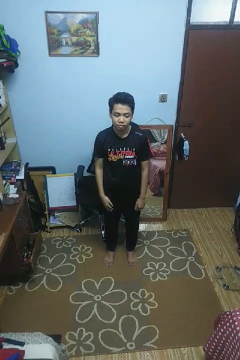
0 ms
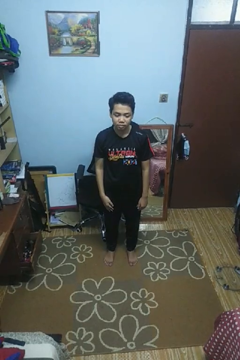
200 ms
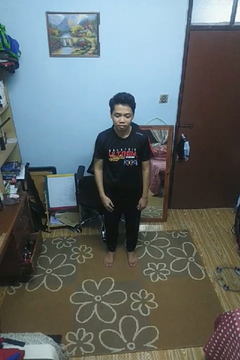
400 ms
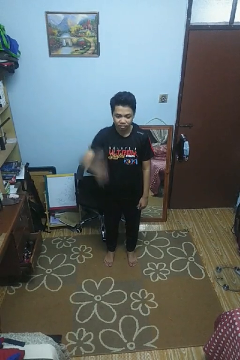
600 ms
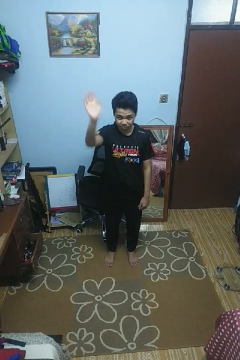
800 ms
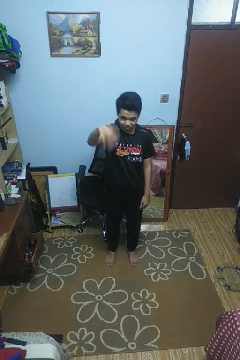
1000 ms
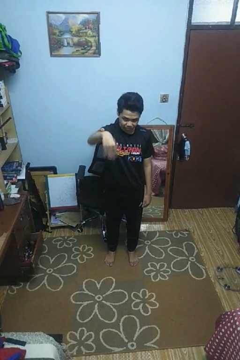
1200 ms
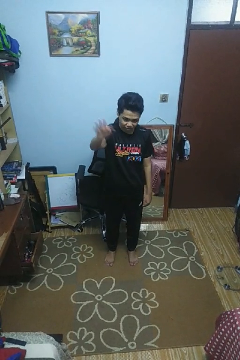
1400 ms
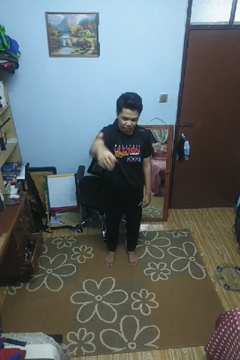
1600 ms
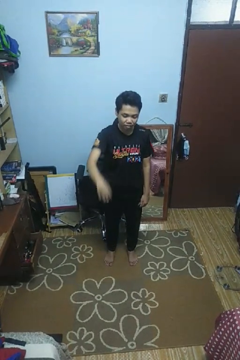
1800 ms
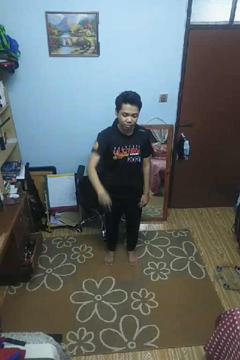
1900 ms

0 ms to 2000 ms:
person gestures come here

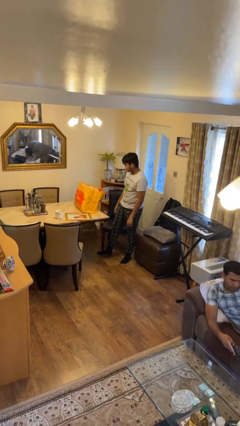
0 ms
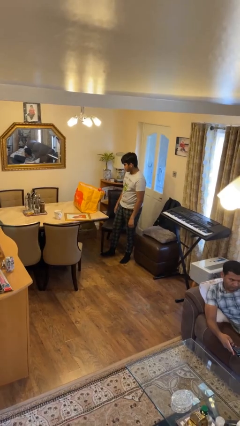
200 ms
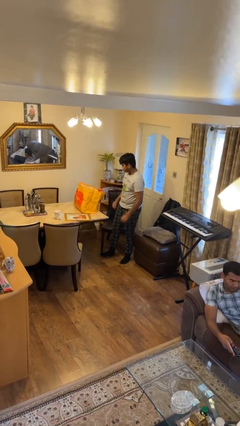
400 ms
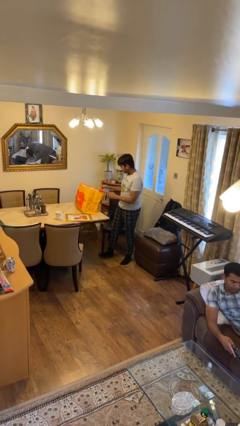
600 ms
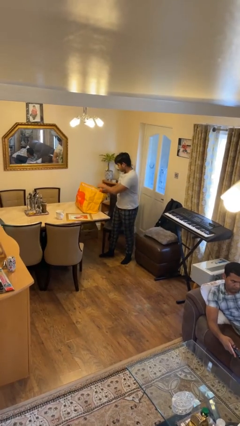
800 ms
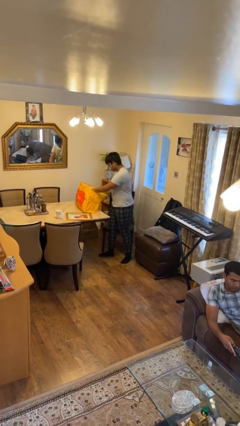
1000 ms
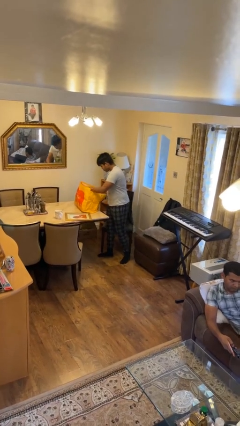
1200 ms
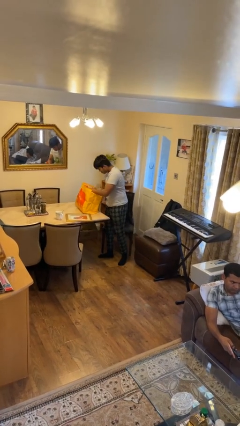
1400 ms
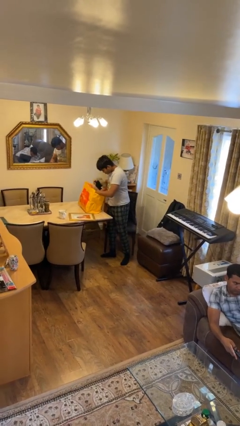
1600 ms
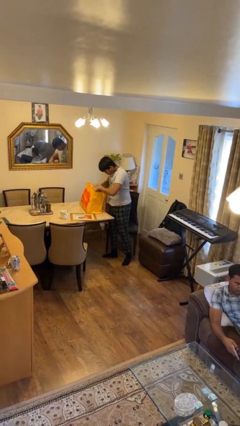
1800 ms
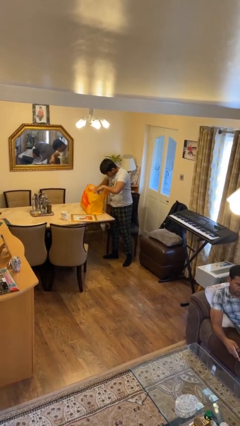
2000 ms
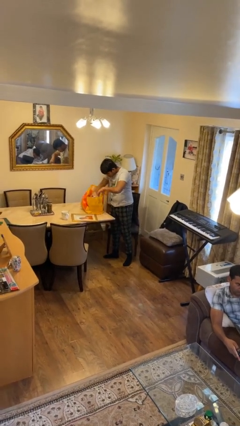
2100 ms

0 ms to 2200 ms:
person searches in bag

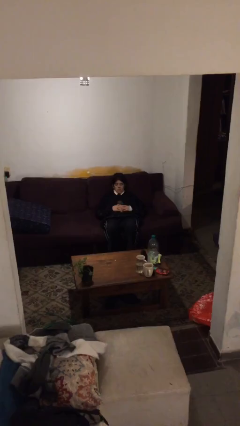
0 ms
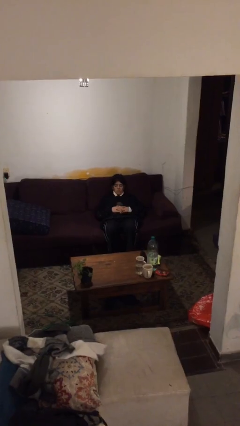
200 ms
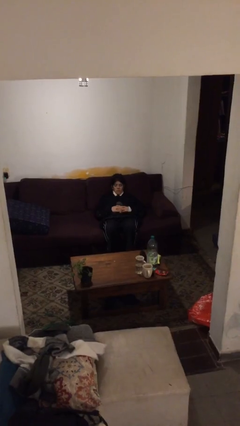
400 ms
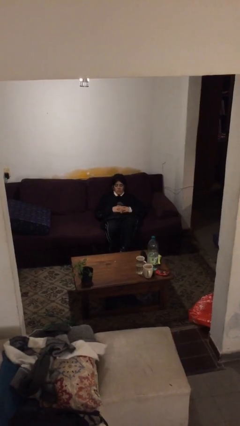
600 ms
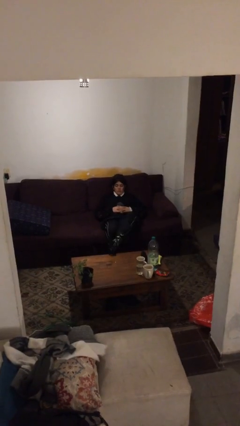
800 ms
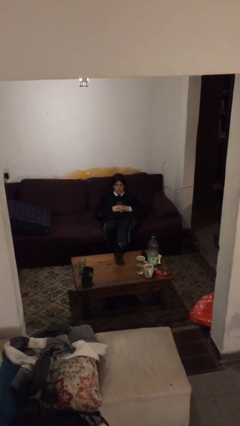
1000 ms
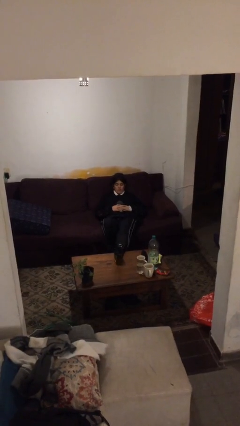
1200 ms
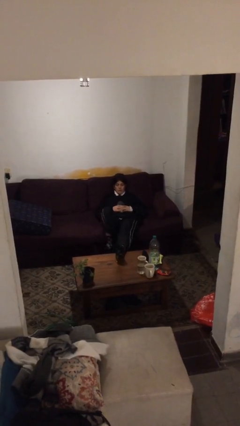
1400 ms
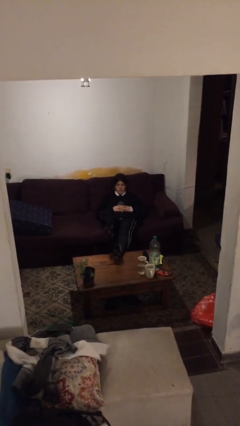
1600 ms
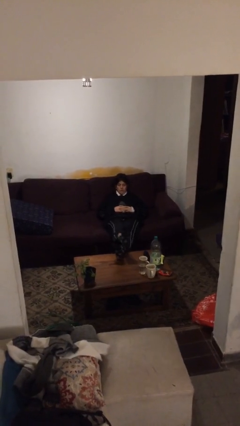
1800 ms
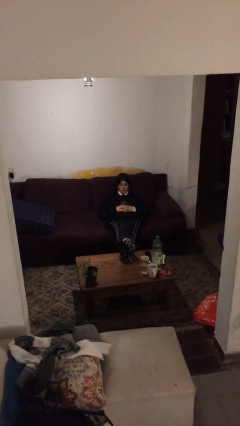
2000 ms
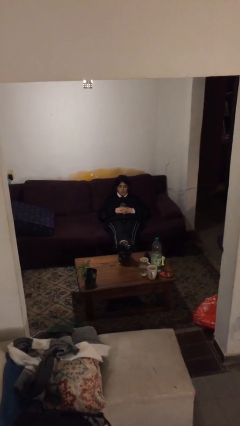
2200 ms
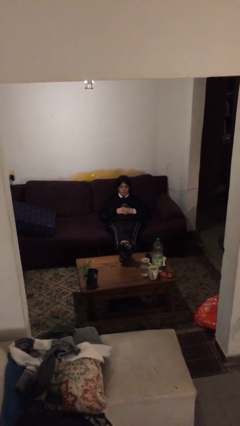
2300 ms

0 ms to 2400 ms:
person puts feet up

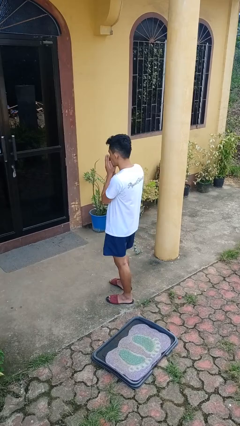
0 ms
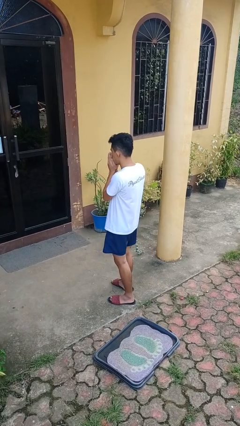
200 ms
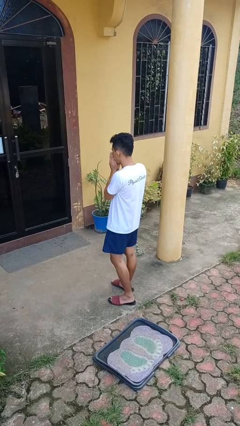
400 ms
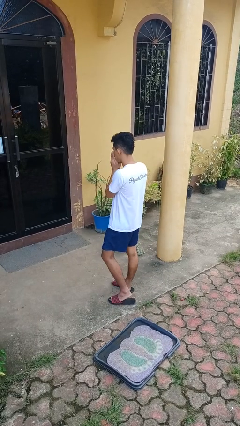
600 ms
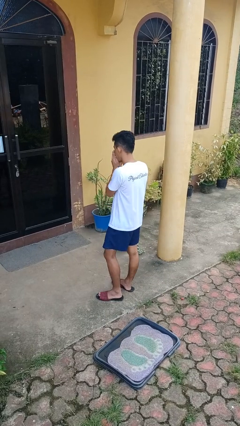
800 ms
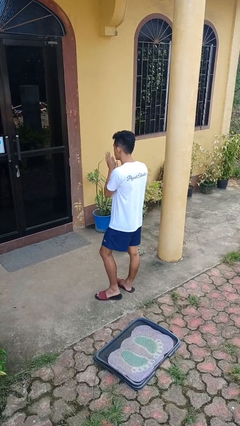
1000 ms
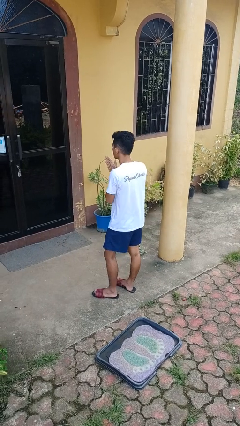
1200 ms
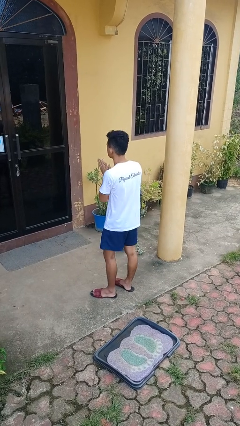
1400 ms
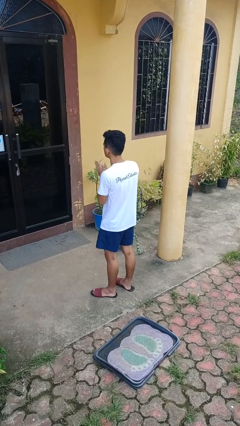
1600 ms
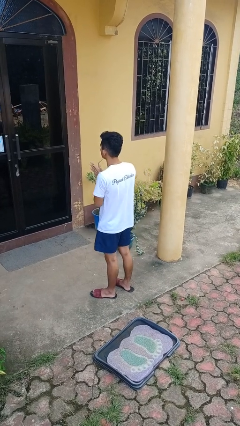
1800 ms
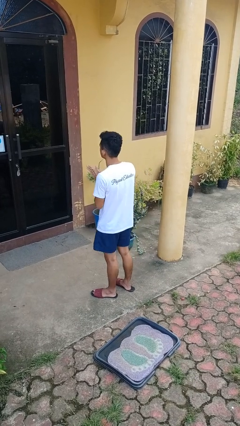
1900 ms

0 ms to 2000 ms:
person blows into hands

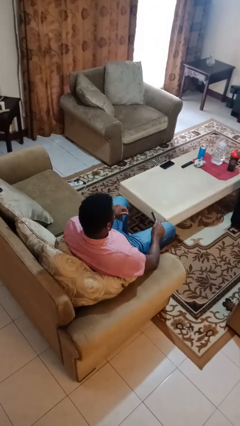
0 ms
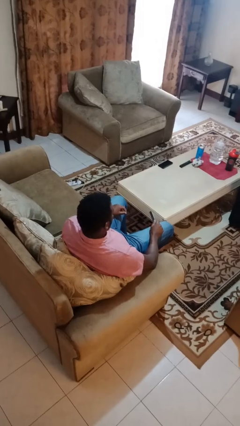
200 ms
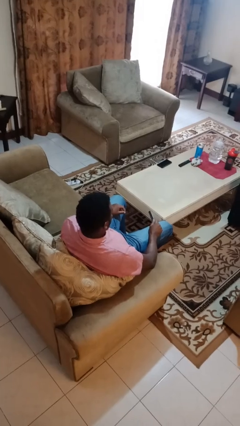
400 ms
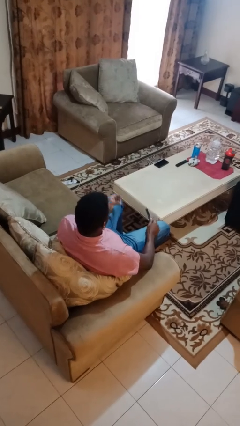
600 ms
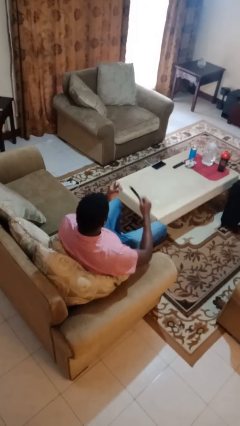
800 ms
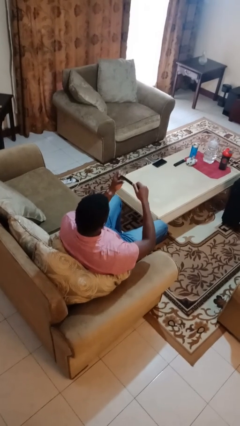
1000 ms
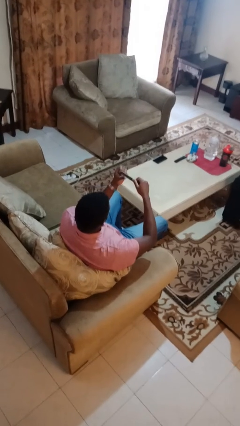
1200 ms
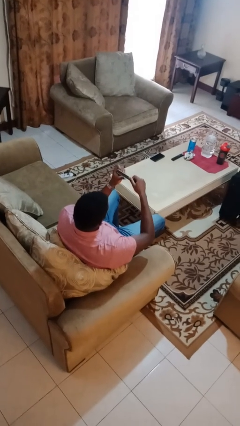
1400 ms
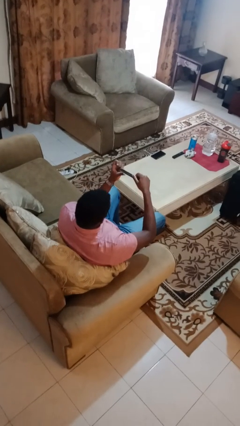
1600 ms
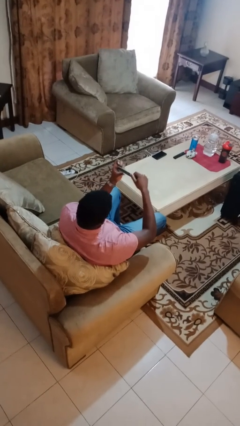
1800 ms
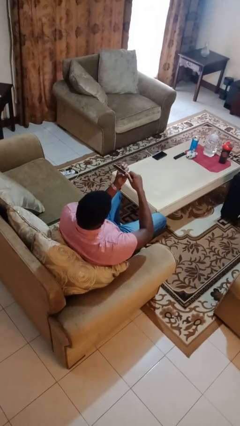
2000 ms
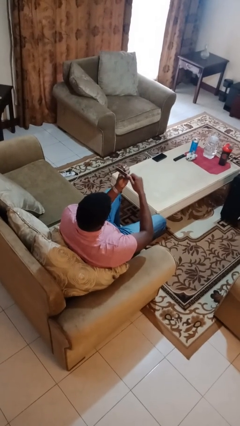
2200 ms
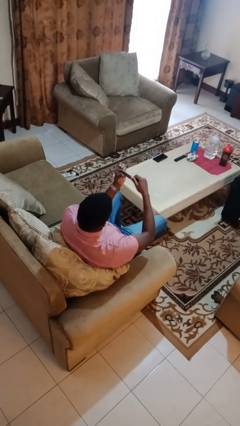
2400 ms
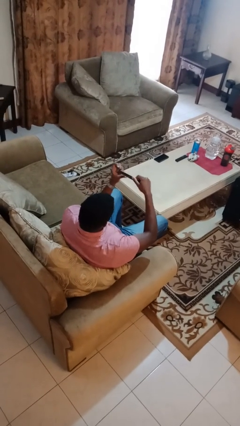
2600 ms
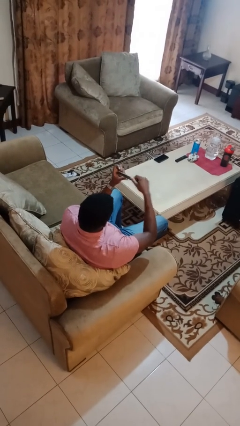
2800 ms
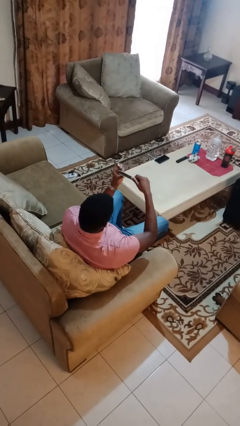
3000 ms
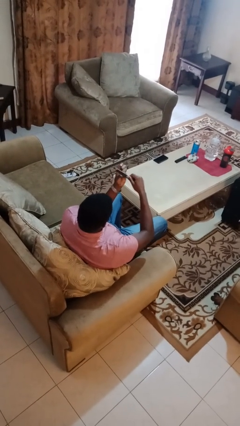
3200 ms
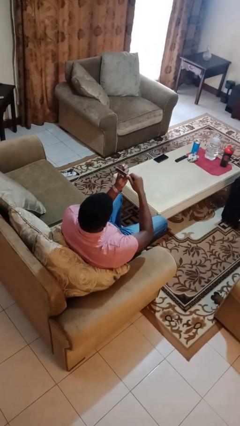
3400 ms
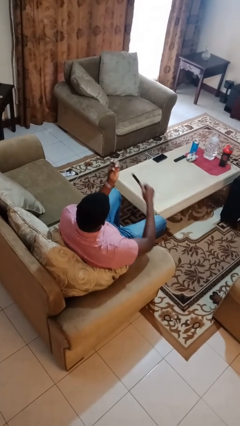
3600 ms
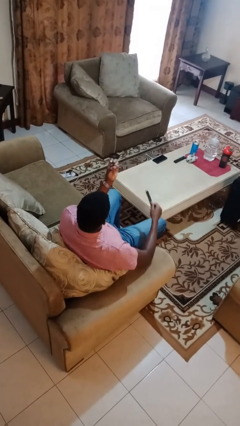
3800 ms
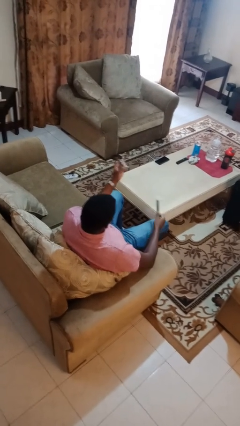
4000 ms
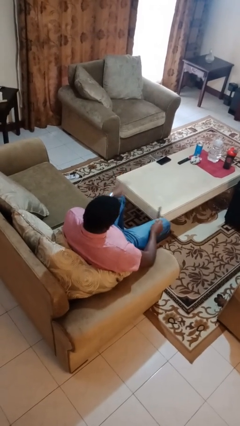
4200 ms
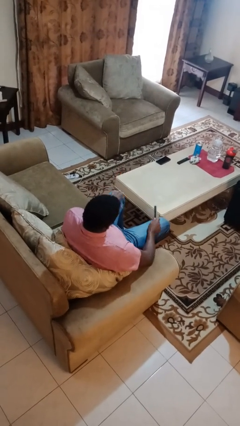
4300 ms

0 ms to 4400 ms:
person files fingernails

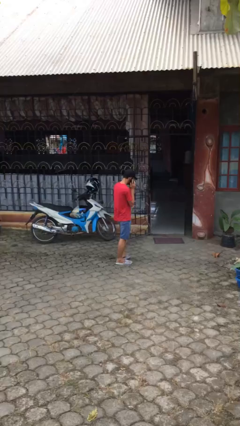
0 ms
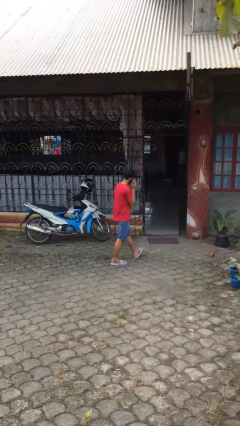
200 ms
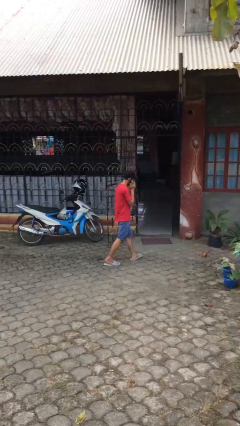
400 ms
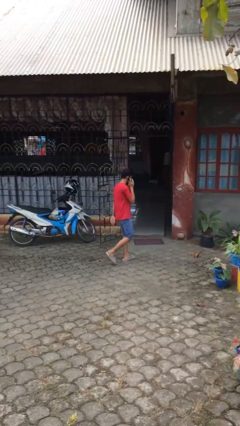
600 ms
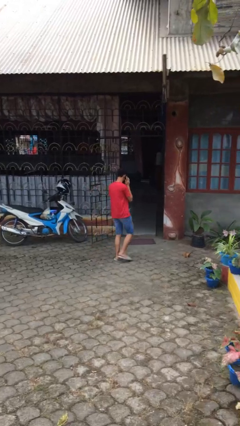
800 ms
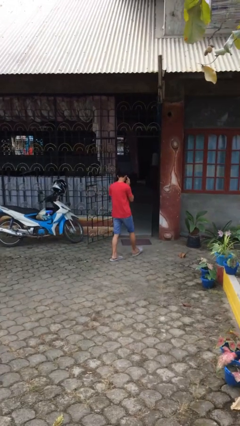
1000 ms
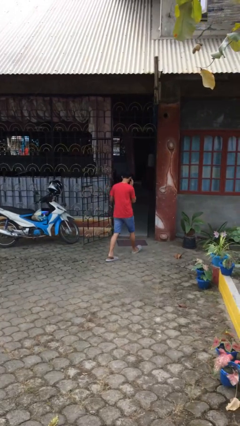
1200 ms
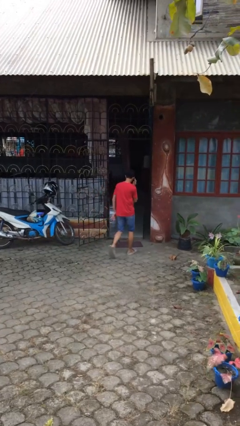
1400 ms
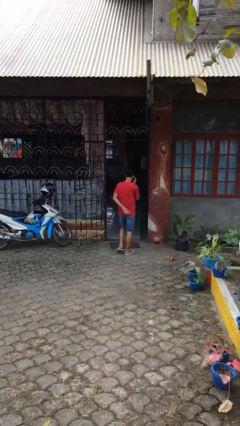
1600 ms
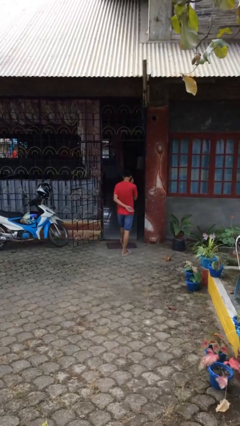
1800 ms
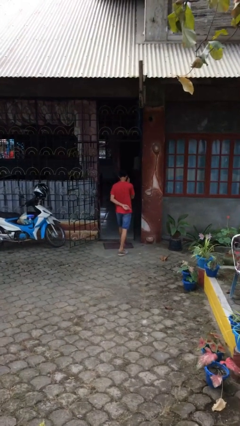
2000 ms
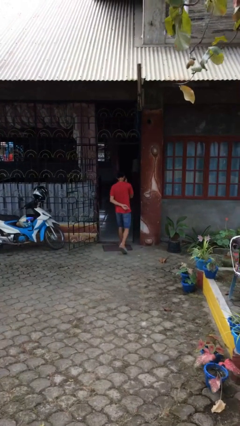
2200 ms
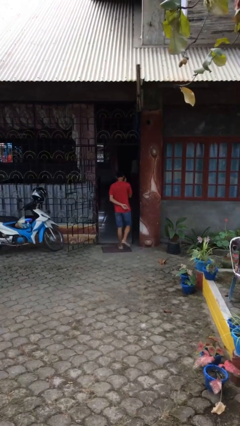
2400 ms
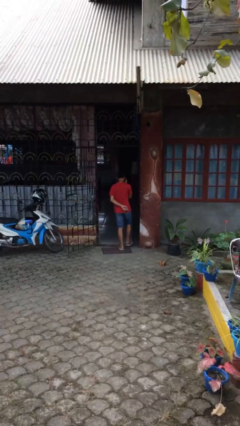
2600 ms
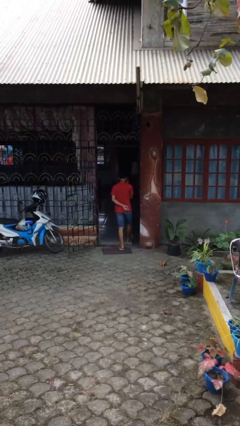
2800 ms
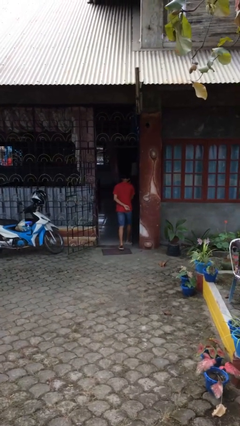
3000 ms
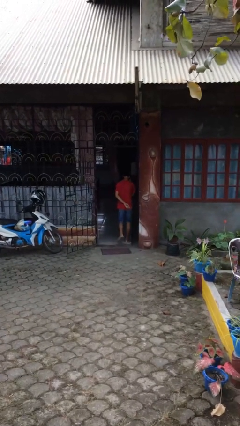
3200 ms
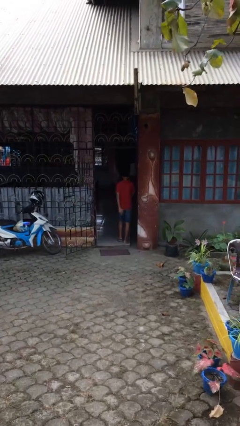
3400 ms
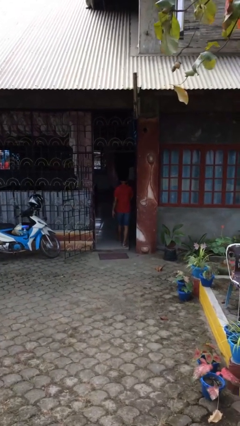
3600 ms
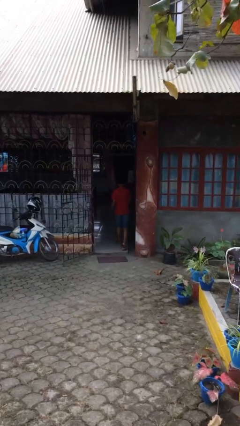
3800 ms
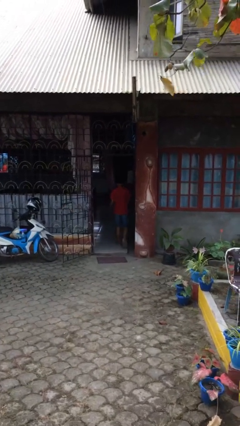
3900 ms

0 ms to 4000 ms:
person exits scene through structure

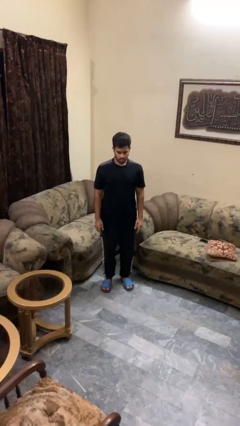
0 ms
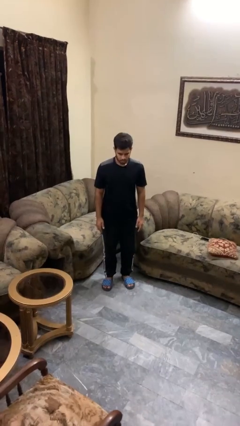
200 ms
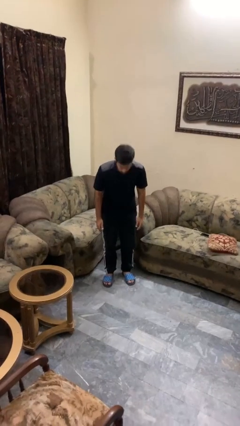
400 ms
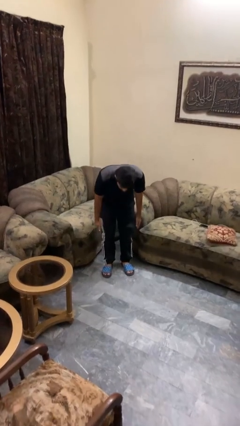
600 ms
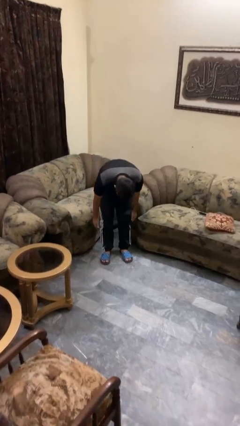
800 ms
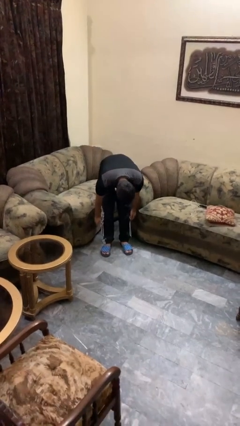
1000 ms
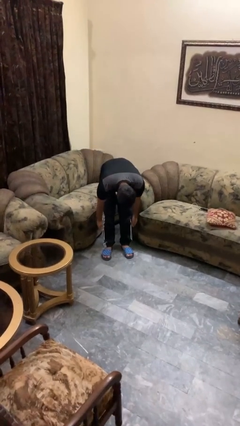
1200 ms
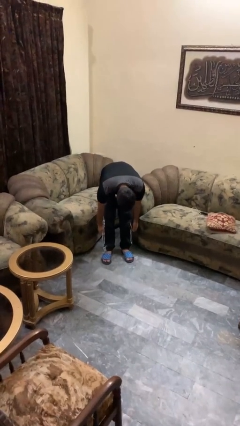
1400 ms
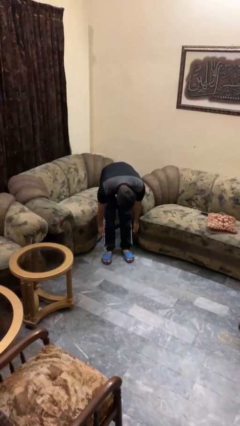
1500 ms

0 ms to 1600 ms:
person bows
